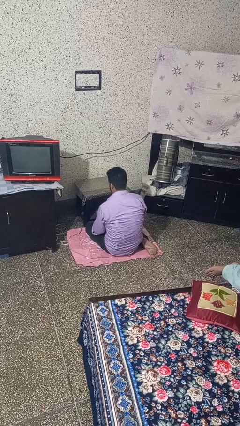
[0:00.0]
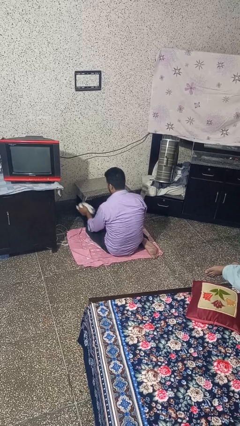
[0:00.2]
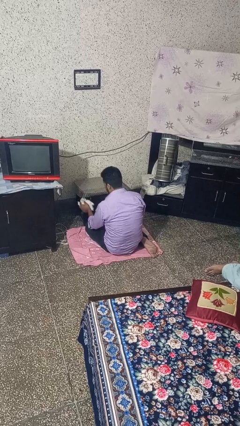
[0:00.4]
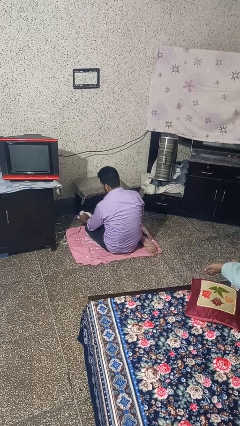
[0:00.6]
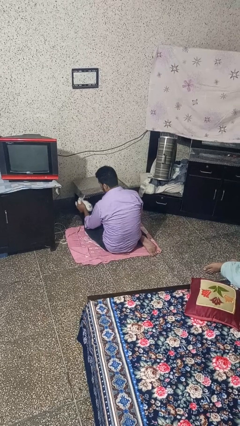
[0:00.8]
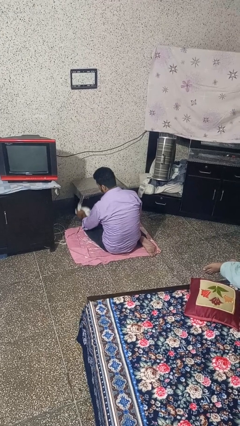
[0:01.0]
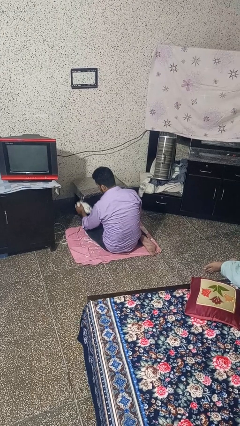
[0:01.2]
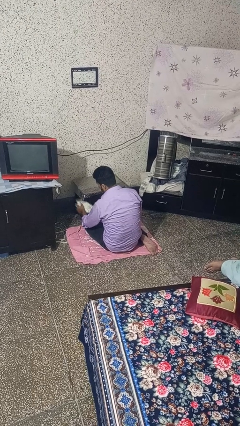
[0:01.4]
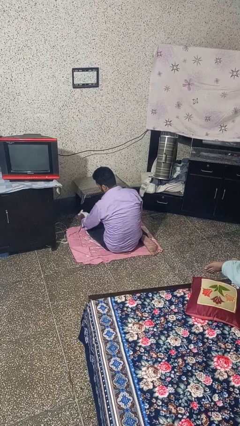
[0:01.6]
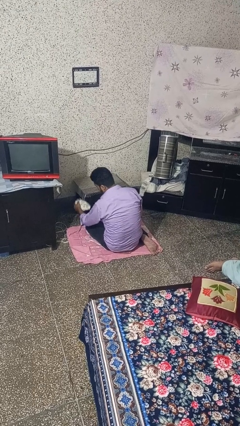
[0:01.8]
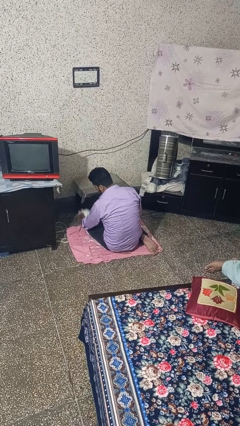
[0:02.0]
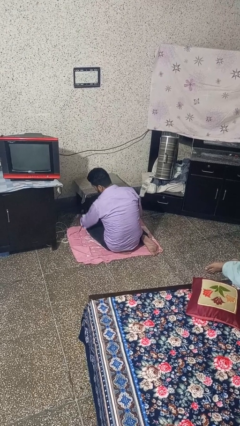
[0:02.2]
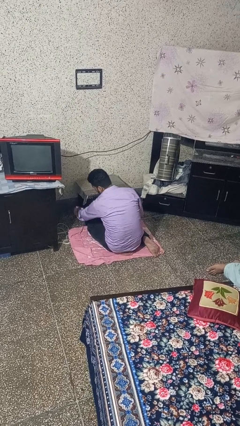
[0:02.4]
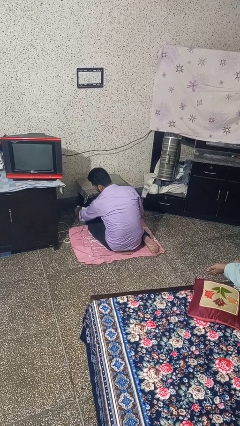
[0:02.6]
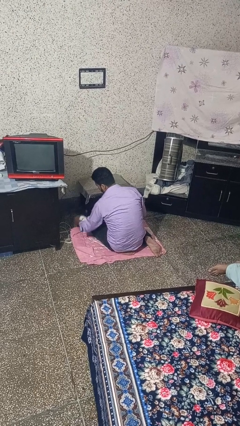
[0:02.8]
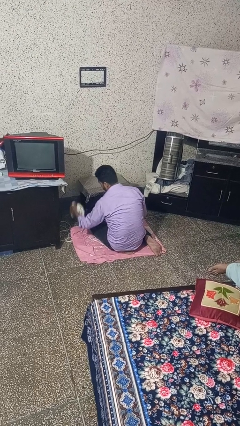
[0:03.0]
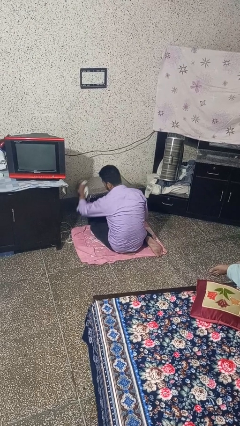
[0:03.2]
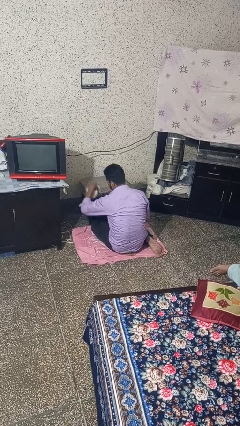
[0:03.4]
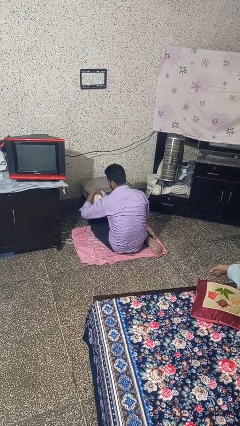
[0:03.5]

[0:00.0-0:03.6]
person cleans table with rag

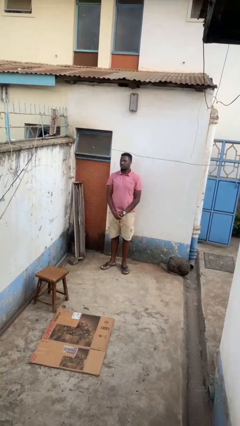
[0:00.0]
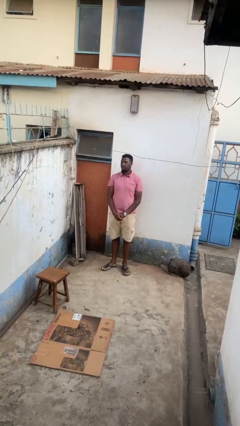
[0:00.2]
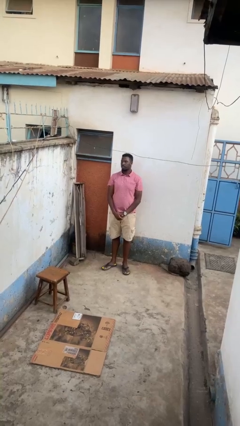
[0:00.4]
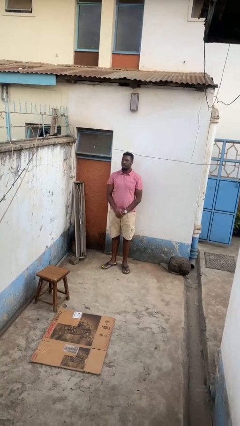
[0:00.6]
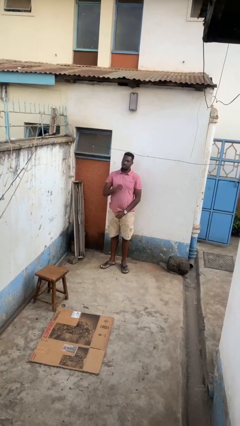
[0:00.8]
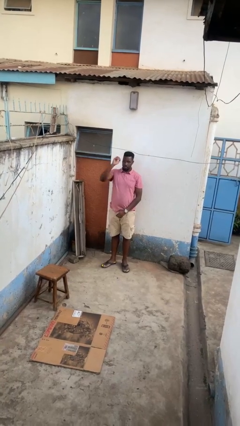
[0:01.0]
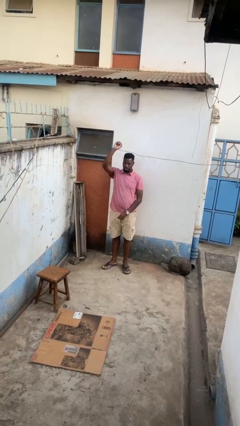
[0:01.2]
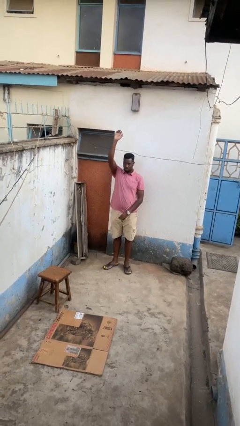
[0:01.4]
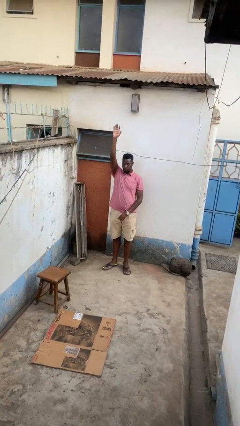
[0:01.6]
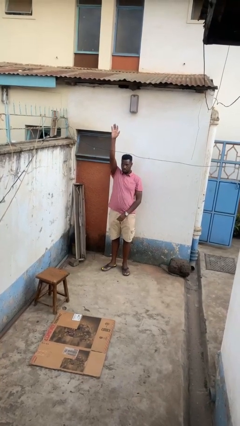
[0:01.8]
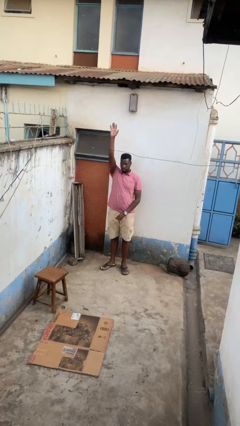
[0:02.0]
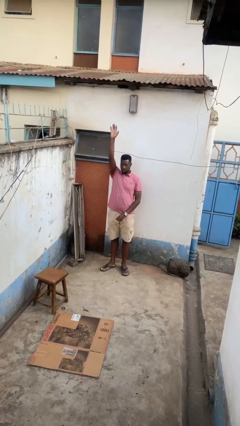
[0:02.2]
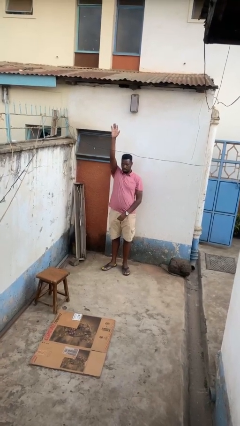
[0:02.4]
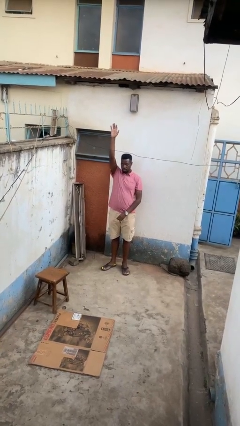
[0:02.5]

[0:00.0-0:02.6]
person gestures raise hand

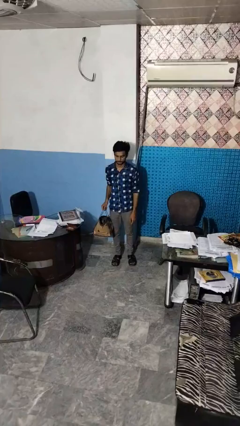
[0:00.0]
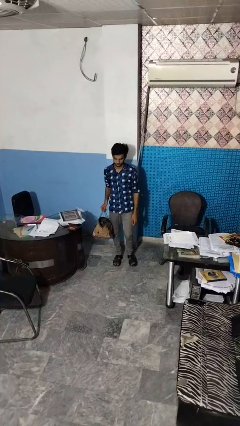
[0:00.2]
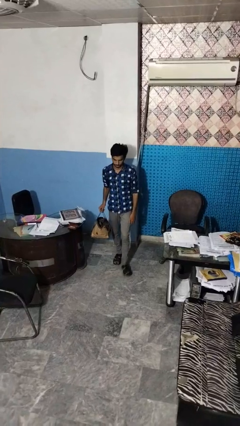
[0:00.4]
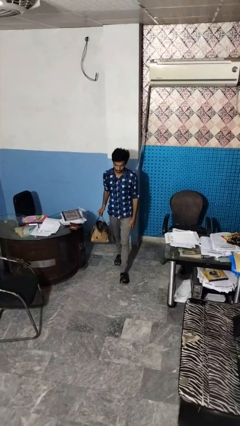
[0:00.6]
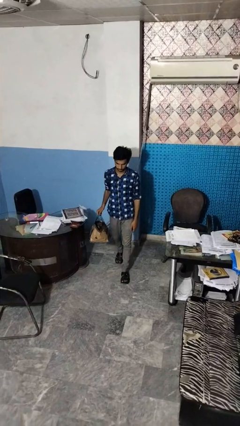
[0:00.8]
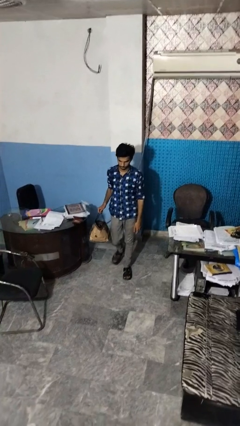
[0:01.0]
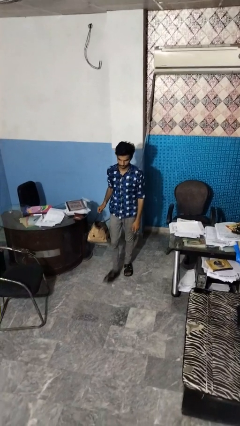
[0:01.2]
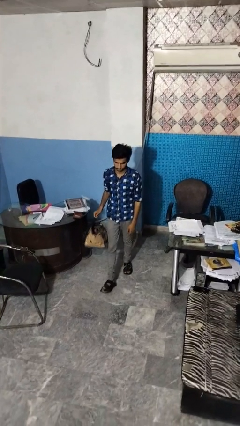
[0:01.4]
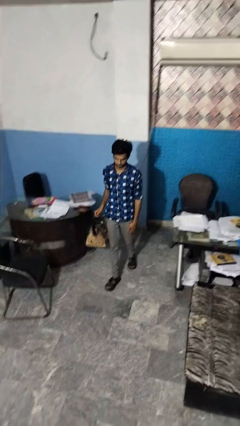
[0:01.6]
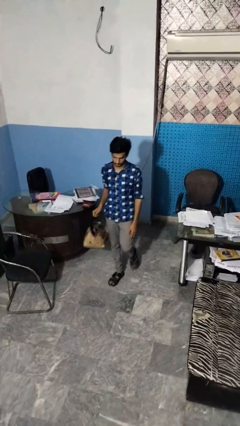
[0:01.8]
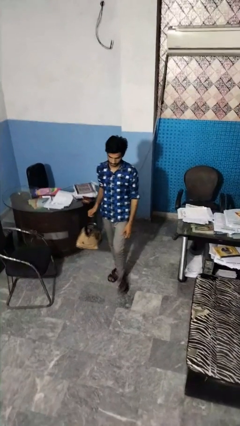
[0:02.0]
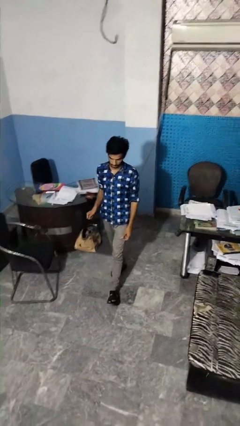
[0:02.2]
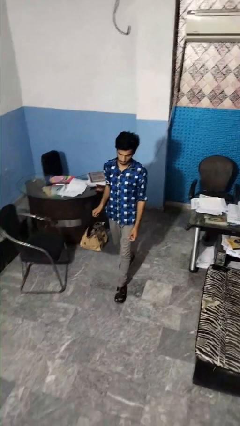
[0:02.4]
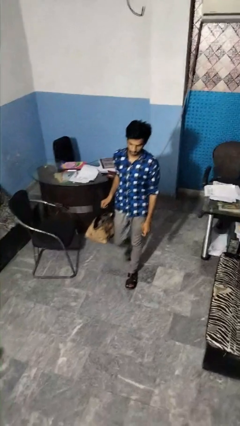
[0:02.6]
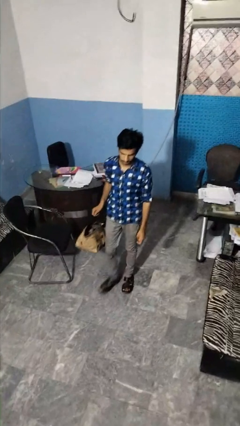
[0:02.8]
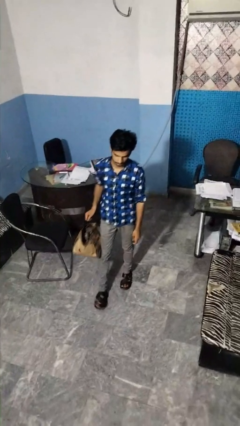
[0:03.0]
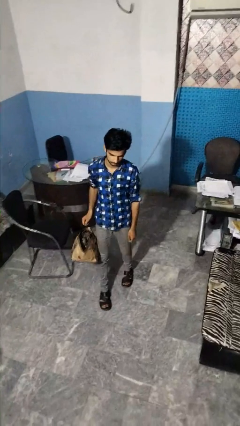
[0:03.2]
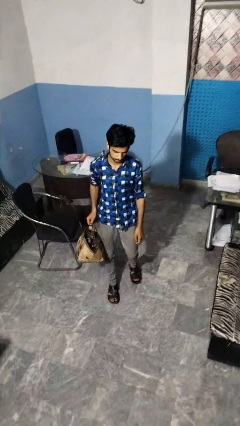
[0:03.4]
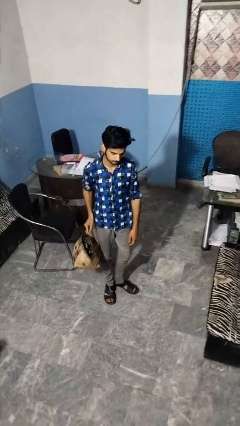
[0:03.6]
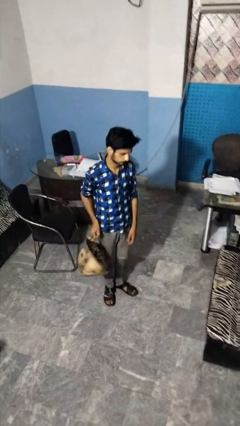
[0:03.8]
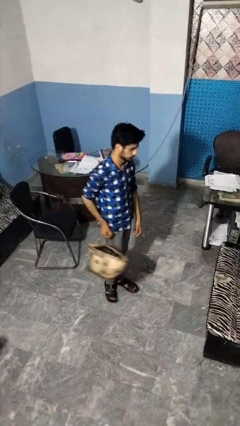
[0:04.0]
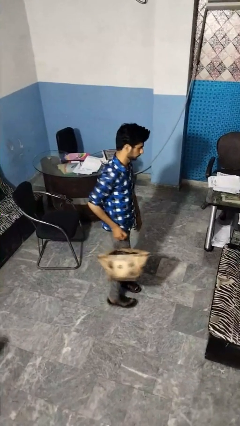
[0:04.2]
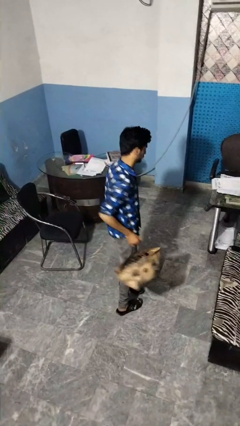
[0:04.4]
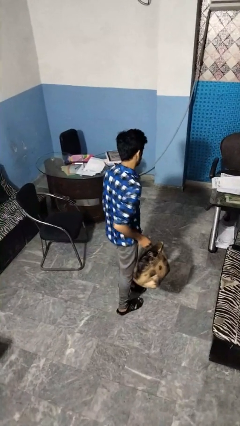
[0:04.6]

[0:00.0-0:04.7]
person carries groceries

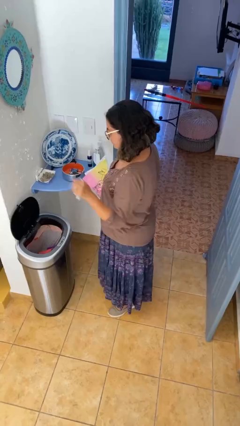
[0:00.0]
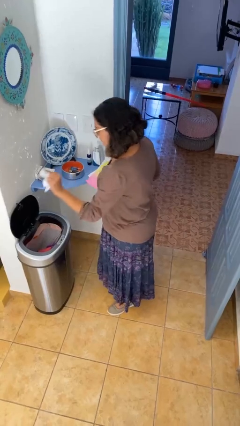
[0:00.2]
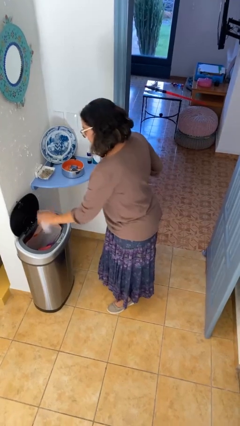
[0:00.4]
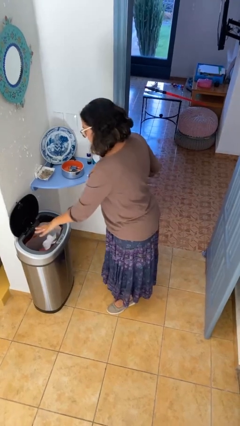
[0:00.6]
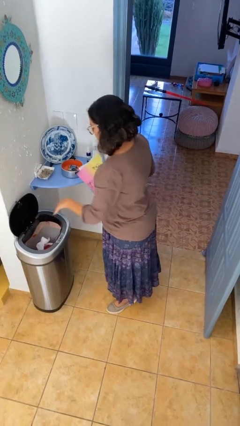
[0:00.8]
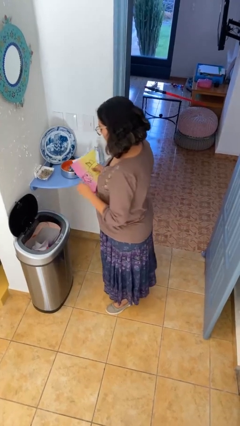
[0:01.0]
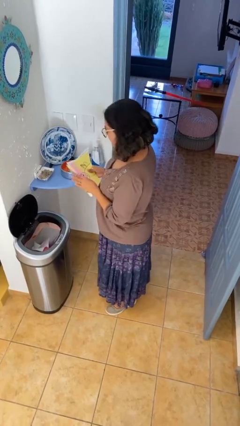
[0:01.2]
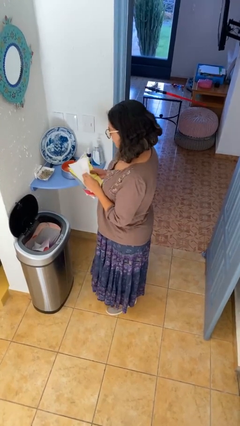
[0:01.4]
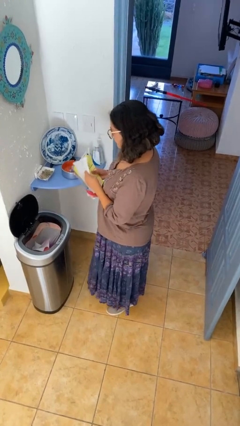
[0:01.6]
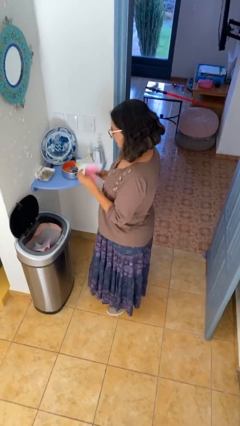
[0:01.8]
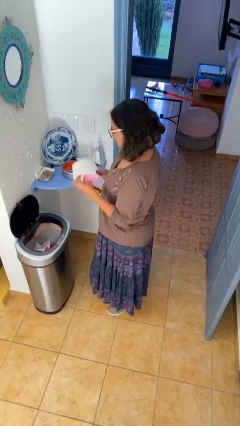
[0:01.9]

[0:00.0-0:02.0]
person discards trash

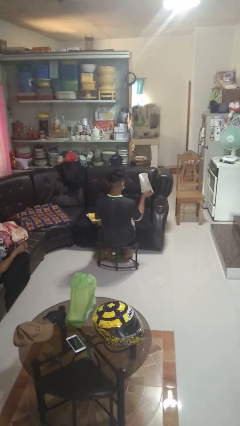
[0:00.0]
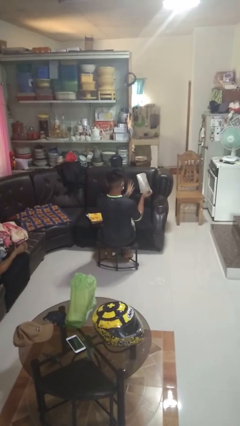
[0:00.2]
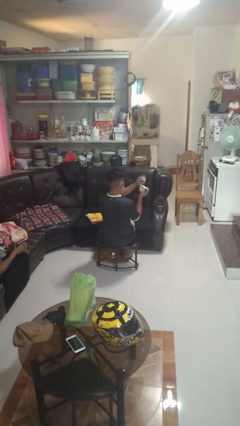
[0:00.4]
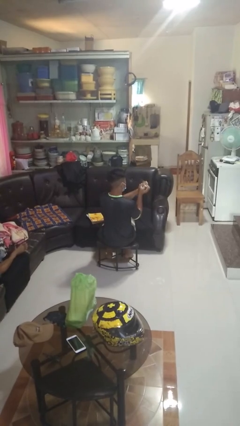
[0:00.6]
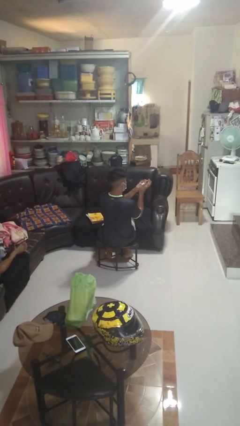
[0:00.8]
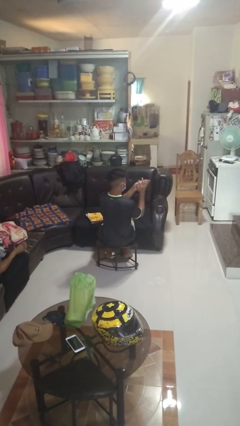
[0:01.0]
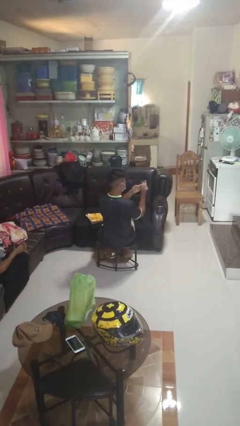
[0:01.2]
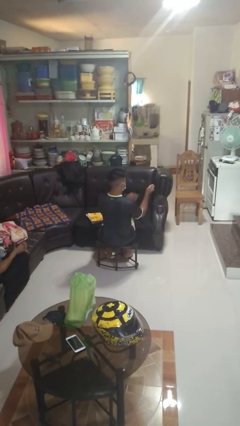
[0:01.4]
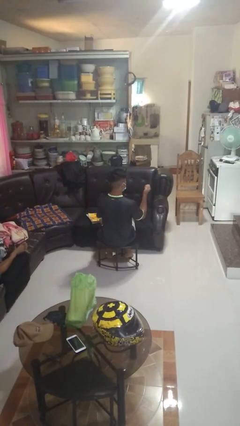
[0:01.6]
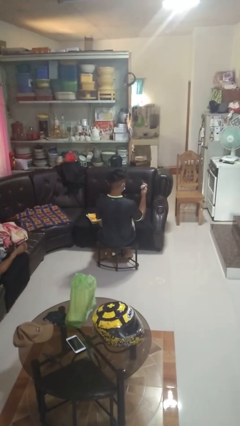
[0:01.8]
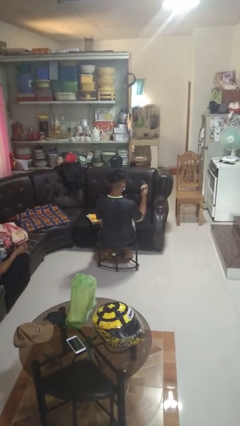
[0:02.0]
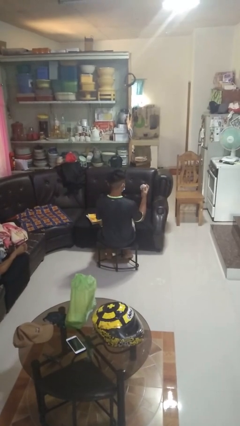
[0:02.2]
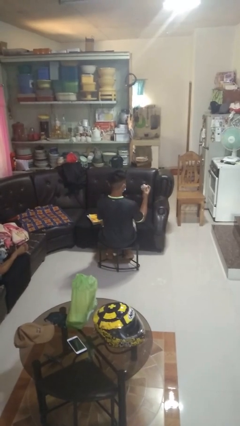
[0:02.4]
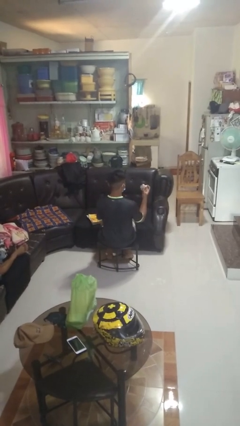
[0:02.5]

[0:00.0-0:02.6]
person crumples paper

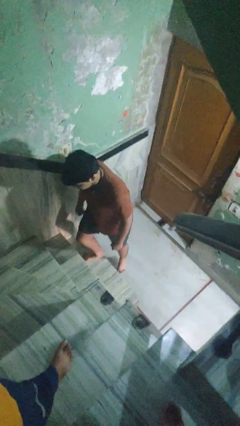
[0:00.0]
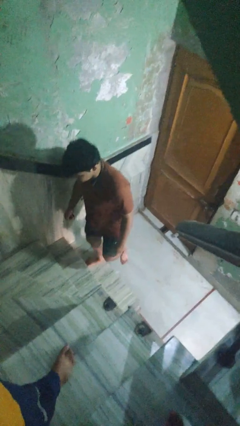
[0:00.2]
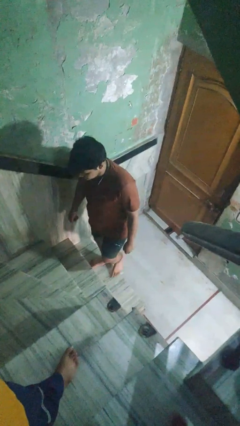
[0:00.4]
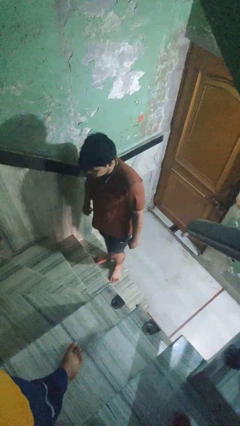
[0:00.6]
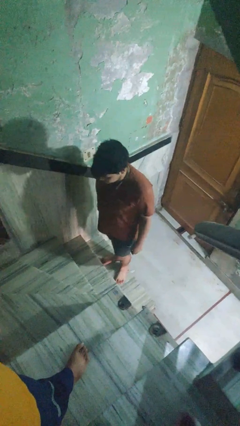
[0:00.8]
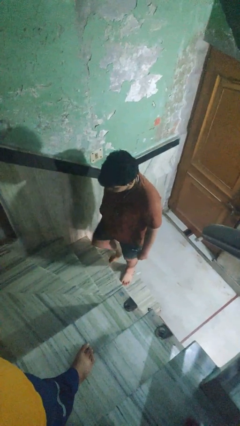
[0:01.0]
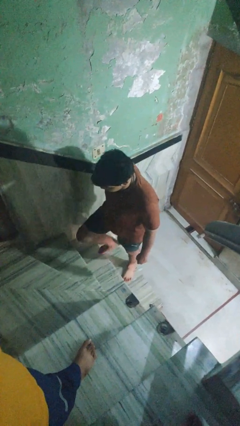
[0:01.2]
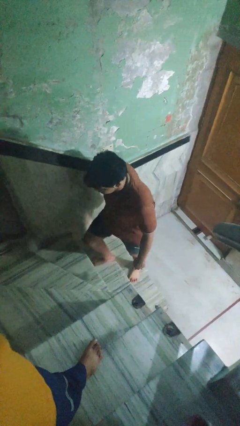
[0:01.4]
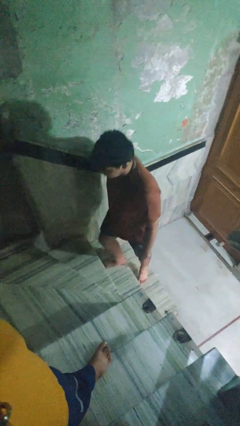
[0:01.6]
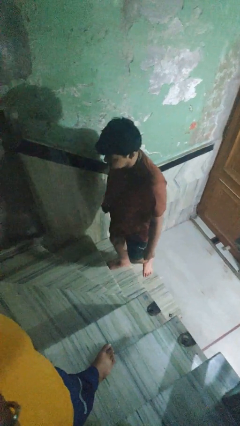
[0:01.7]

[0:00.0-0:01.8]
person climbs up stairs

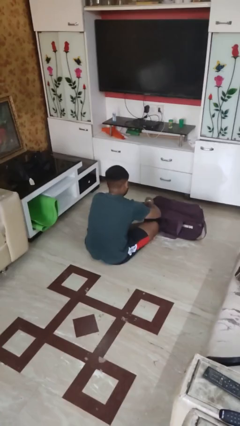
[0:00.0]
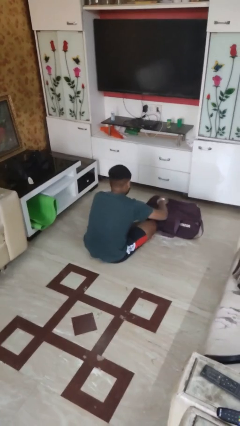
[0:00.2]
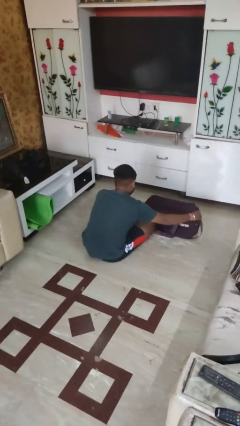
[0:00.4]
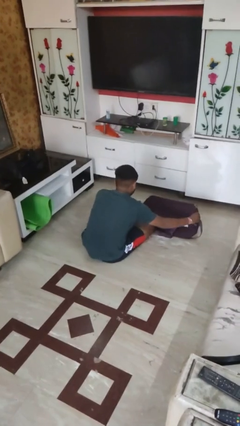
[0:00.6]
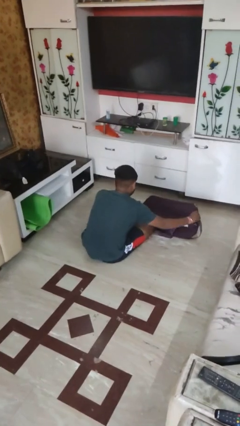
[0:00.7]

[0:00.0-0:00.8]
person opens suitcase
